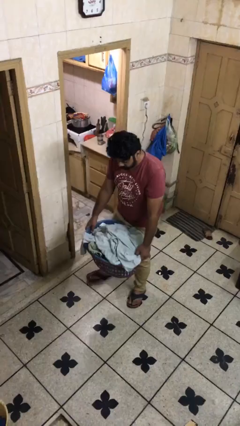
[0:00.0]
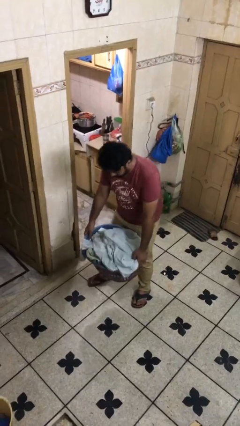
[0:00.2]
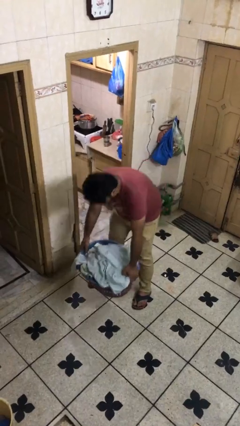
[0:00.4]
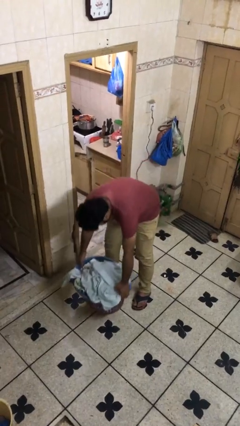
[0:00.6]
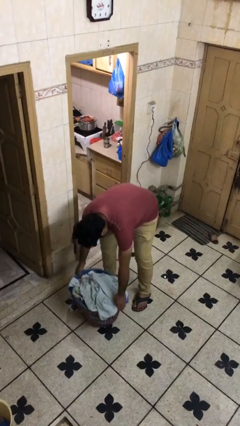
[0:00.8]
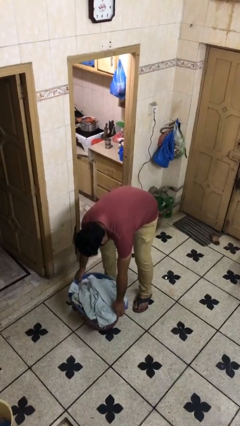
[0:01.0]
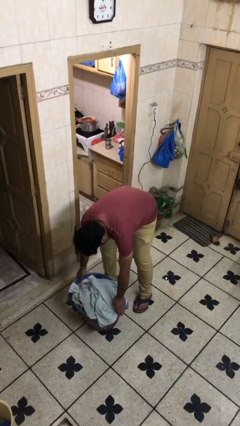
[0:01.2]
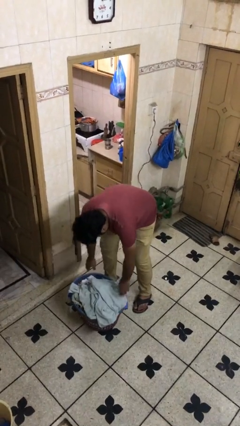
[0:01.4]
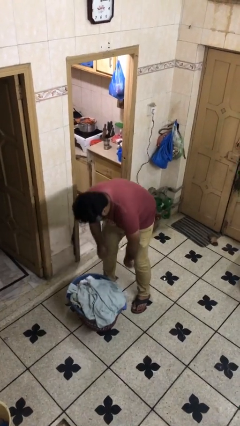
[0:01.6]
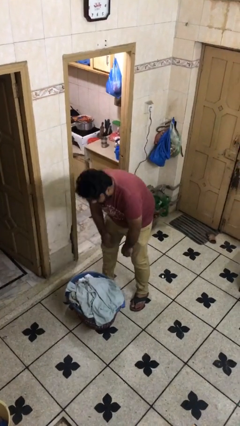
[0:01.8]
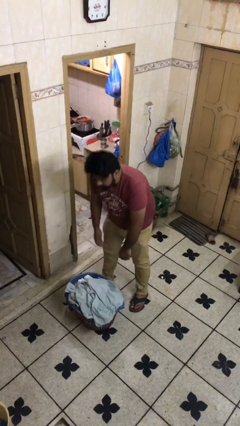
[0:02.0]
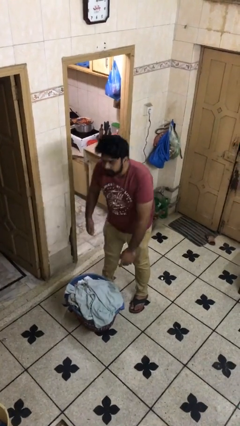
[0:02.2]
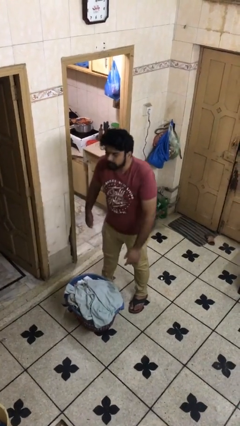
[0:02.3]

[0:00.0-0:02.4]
person puts down object on floor

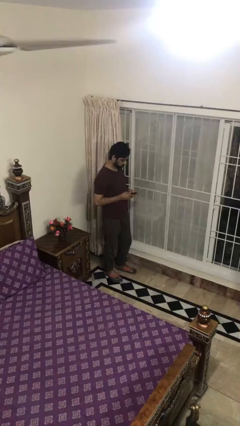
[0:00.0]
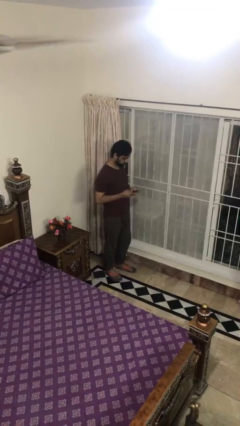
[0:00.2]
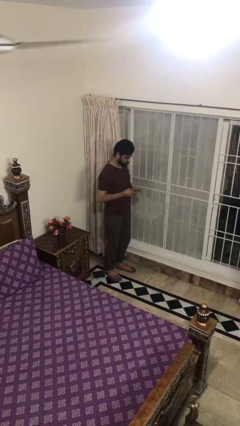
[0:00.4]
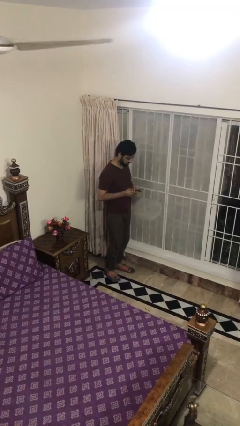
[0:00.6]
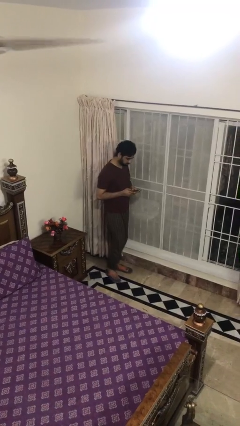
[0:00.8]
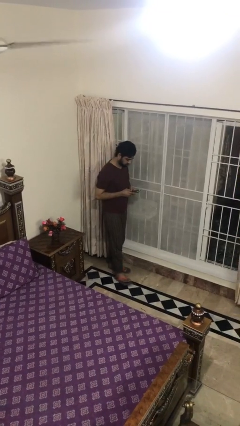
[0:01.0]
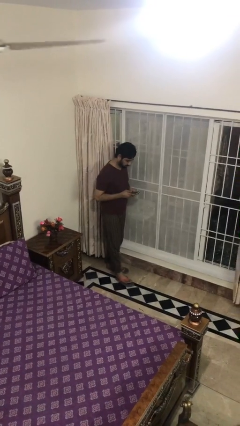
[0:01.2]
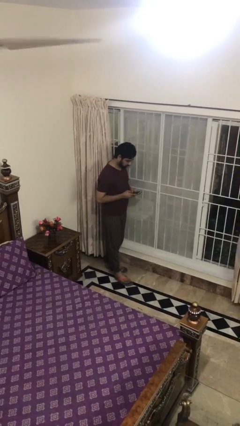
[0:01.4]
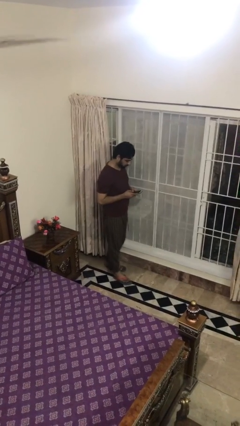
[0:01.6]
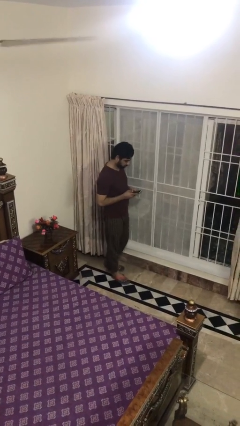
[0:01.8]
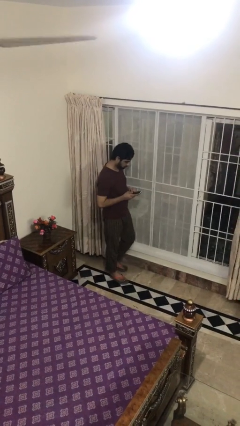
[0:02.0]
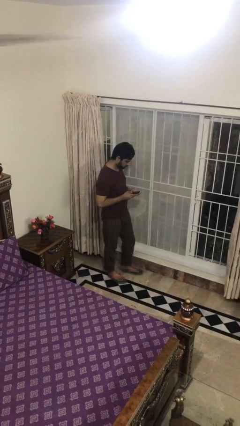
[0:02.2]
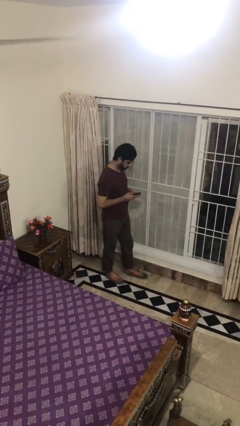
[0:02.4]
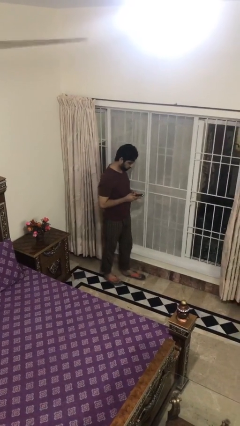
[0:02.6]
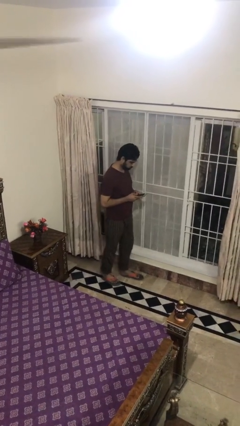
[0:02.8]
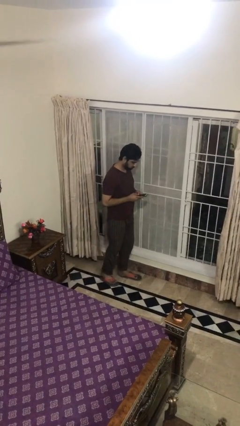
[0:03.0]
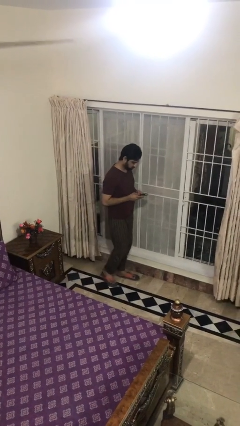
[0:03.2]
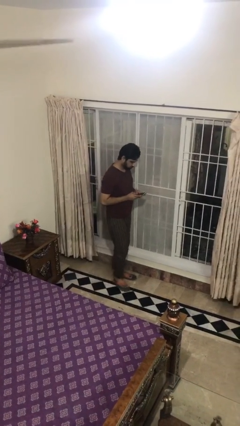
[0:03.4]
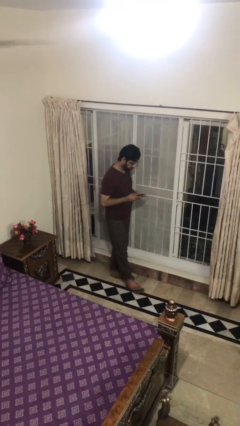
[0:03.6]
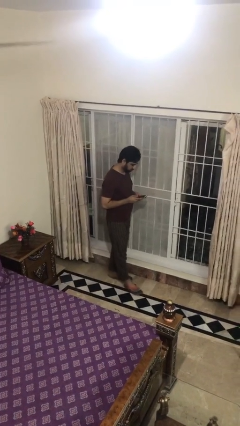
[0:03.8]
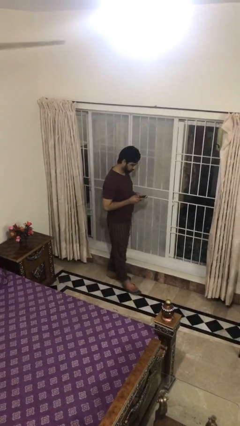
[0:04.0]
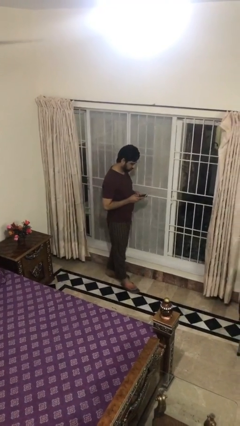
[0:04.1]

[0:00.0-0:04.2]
person texts on phone

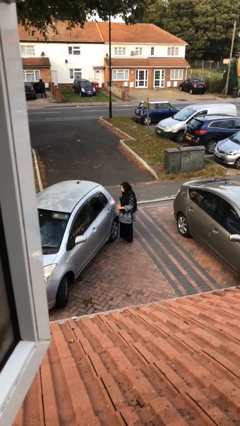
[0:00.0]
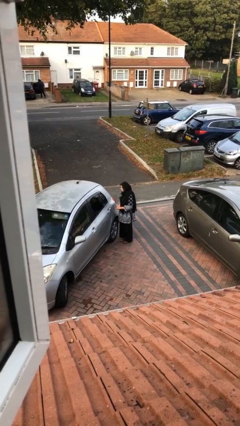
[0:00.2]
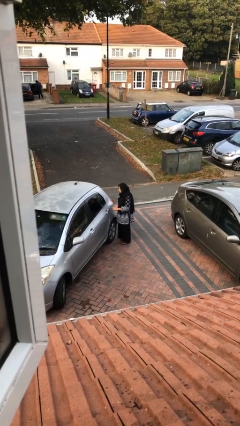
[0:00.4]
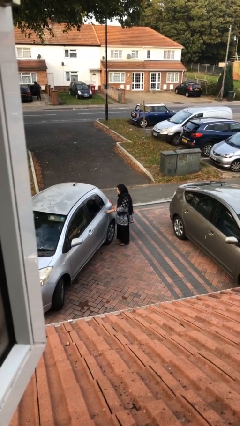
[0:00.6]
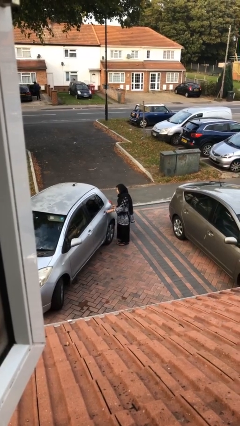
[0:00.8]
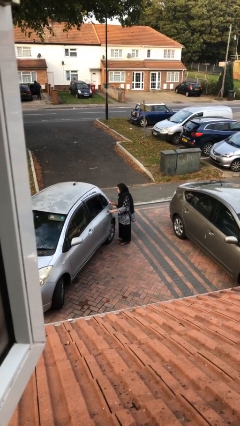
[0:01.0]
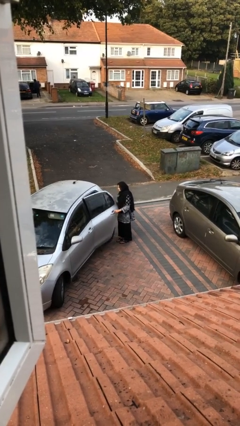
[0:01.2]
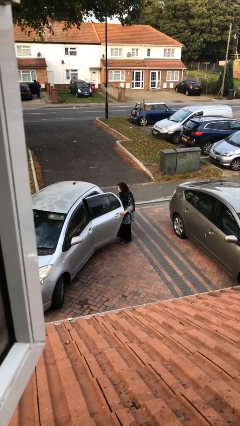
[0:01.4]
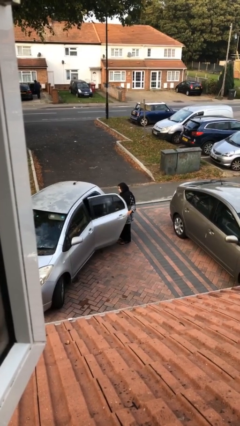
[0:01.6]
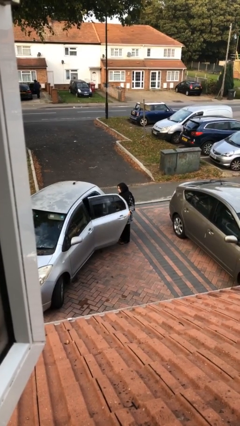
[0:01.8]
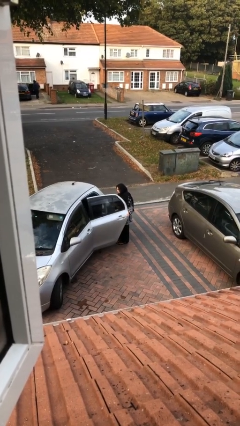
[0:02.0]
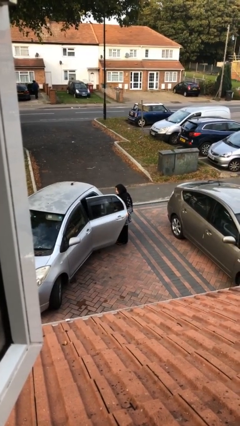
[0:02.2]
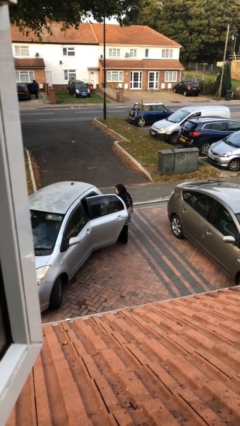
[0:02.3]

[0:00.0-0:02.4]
person opens car door

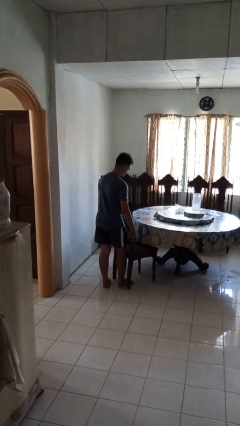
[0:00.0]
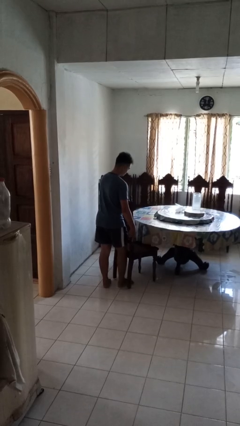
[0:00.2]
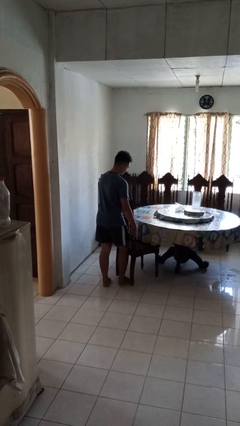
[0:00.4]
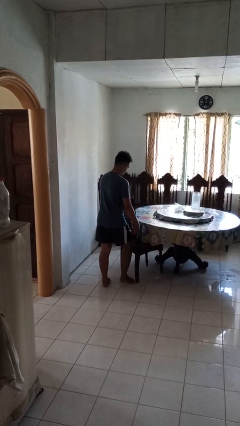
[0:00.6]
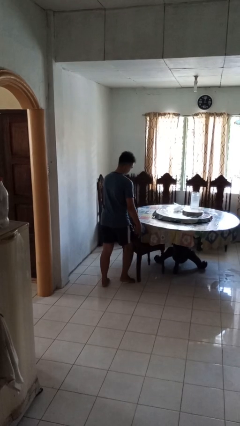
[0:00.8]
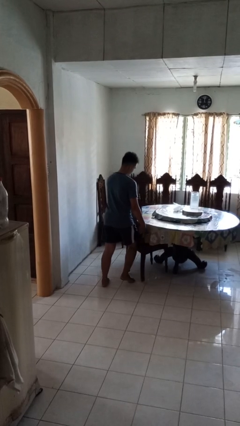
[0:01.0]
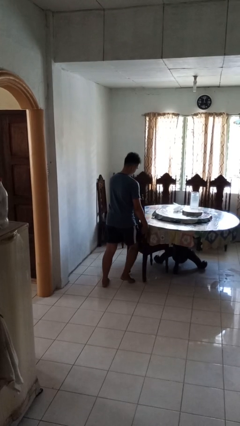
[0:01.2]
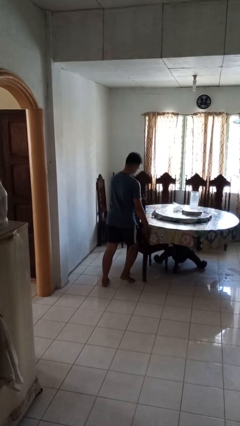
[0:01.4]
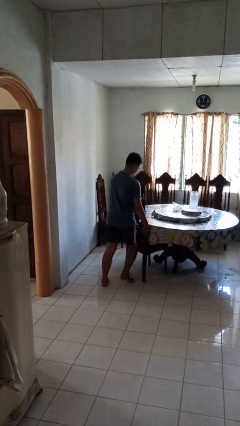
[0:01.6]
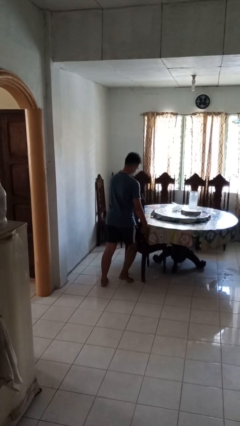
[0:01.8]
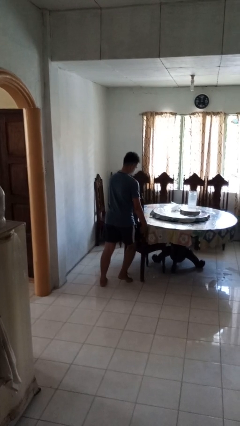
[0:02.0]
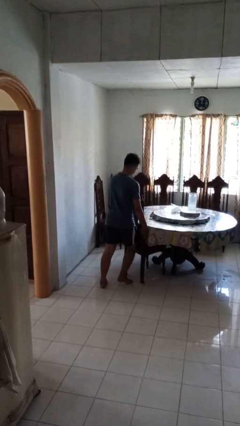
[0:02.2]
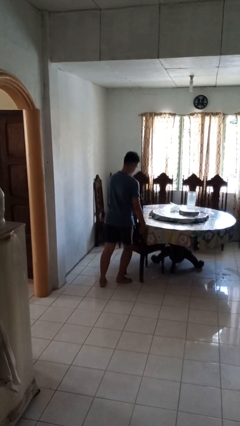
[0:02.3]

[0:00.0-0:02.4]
person pushes in chair

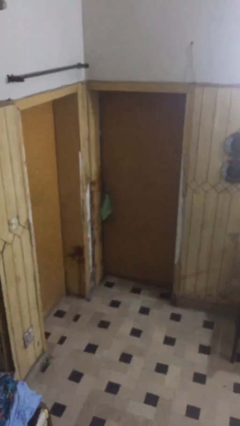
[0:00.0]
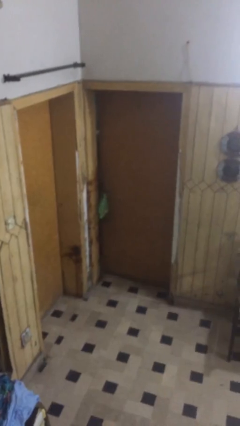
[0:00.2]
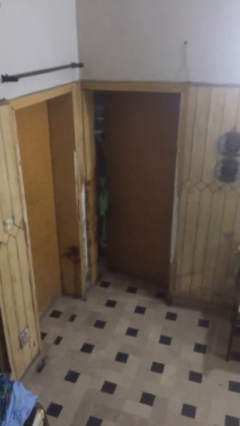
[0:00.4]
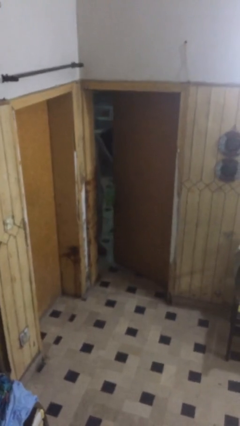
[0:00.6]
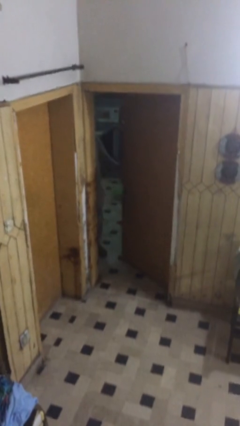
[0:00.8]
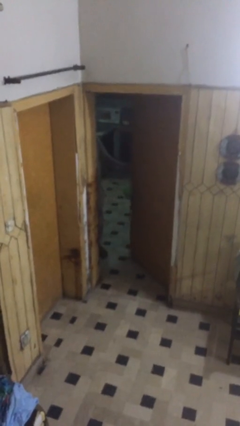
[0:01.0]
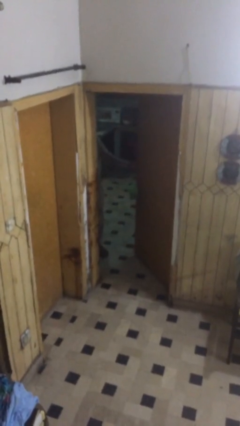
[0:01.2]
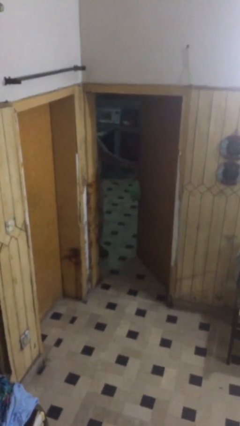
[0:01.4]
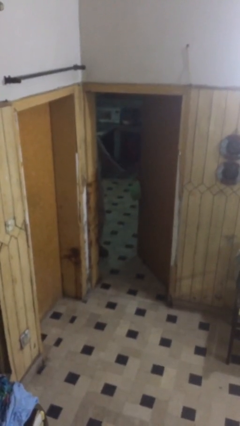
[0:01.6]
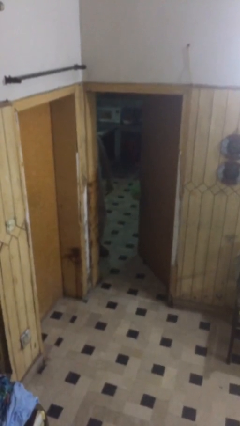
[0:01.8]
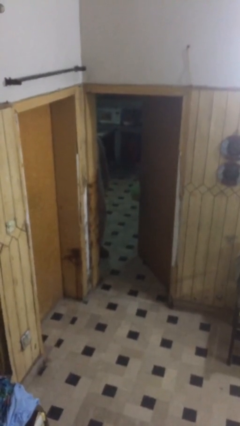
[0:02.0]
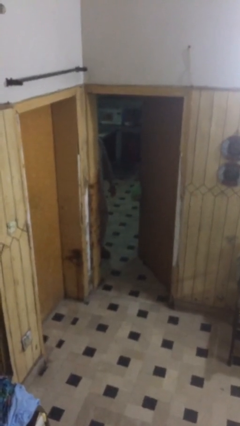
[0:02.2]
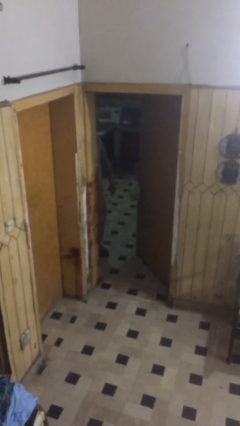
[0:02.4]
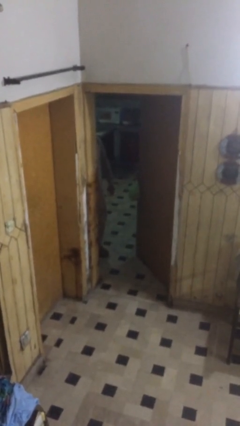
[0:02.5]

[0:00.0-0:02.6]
person opens facility door

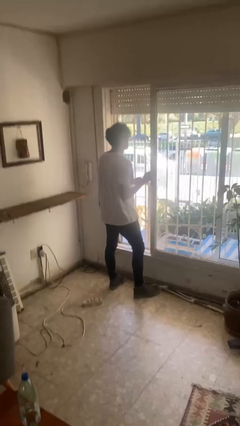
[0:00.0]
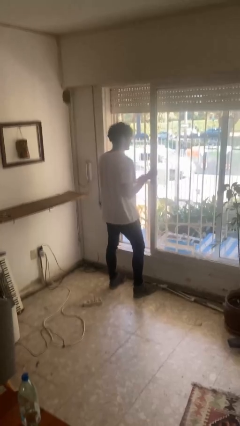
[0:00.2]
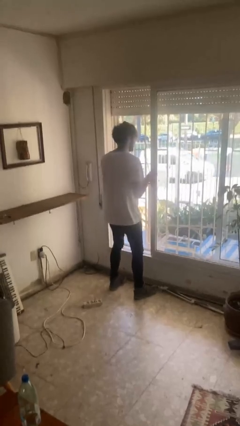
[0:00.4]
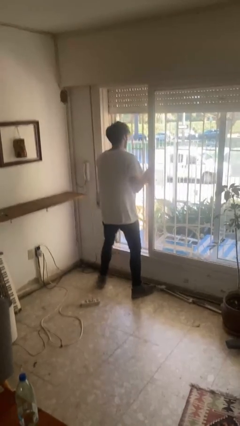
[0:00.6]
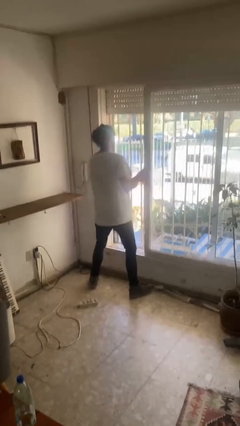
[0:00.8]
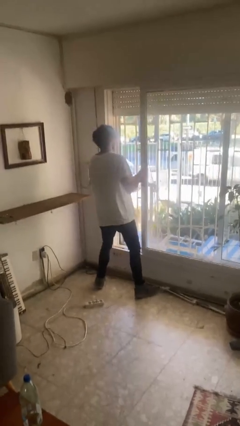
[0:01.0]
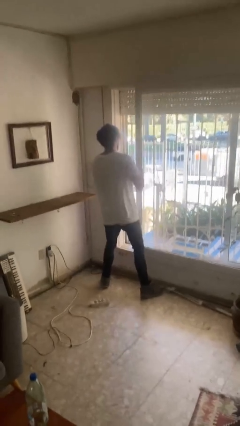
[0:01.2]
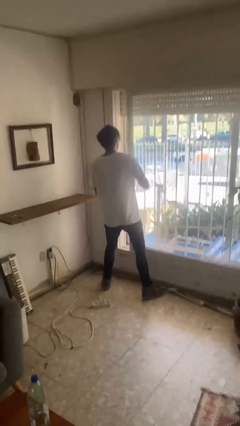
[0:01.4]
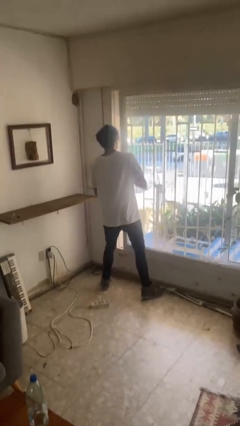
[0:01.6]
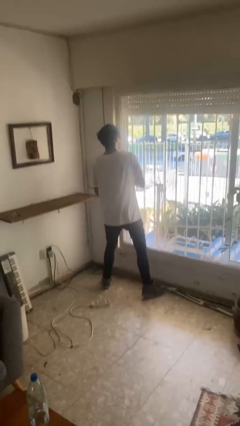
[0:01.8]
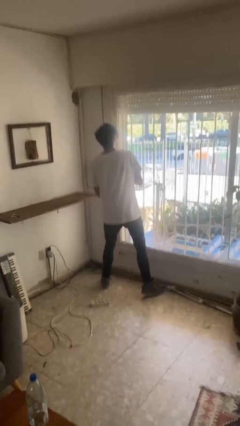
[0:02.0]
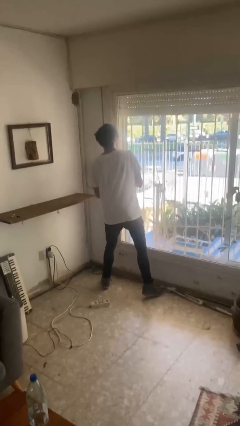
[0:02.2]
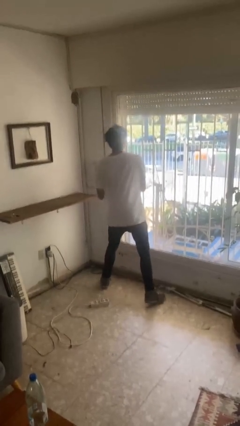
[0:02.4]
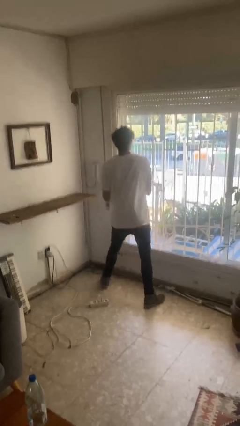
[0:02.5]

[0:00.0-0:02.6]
person closes sliding door

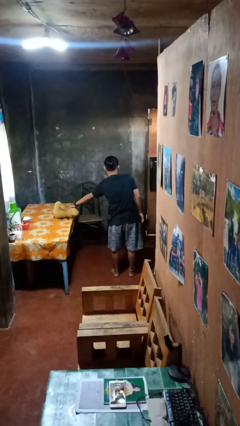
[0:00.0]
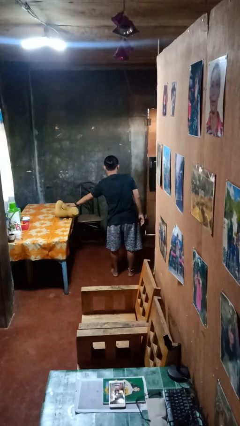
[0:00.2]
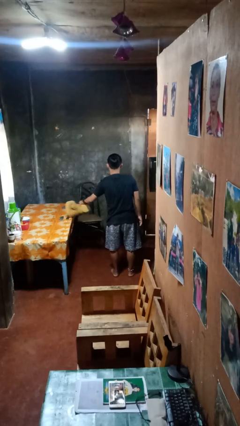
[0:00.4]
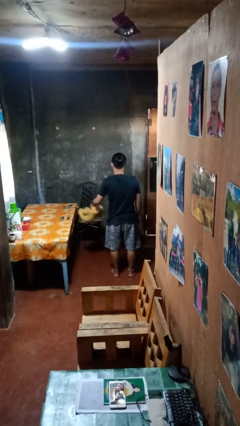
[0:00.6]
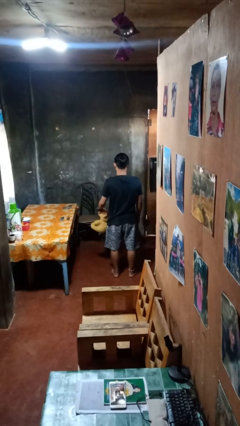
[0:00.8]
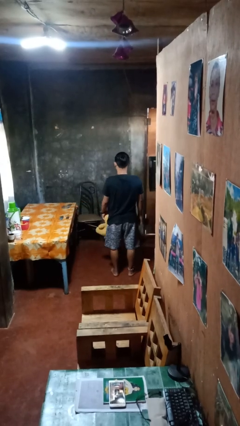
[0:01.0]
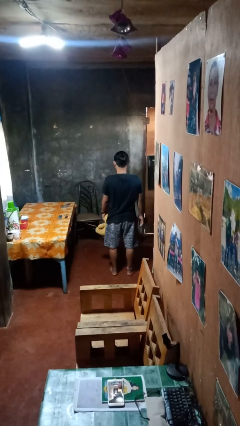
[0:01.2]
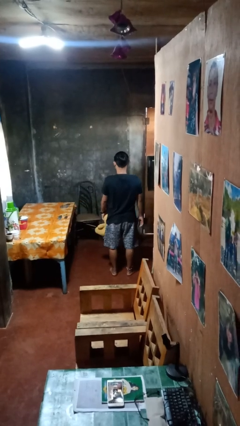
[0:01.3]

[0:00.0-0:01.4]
person picks up object from table
